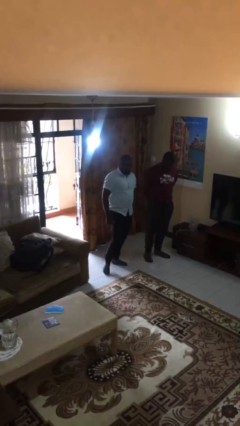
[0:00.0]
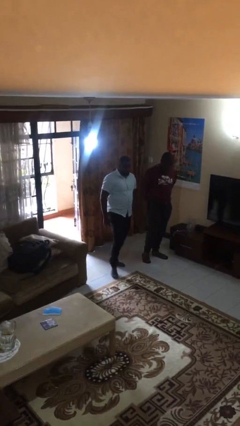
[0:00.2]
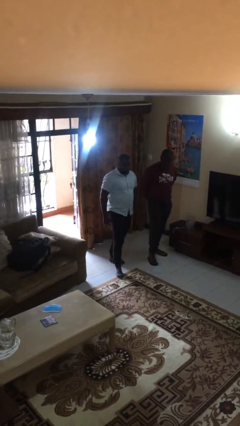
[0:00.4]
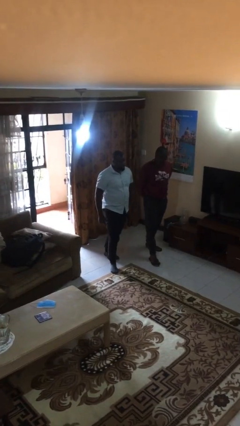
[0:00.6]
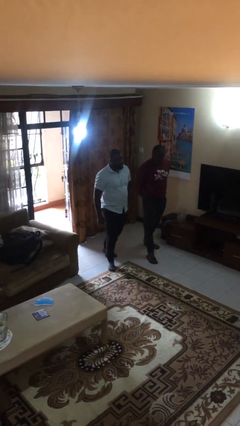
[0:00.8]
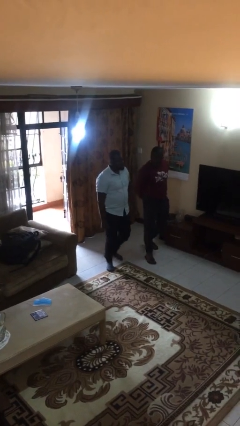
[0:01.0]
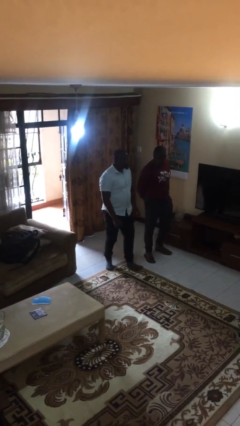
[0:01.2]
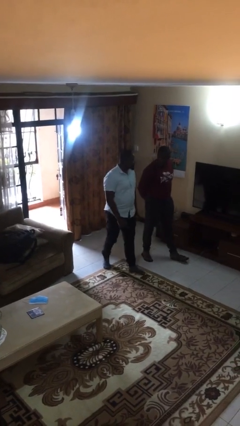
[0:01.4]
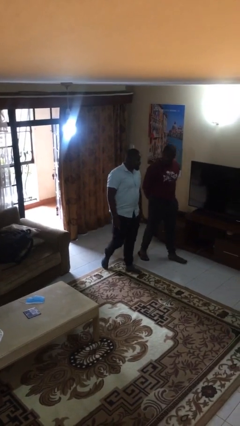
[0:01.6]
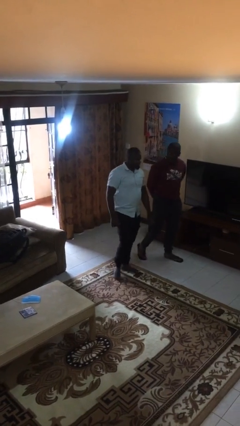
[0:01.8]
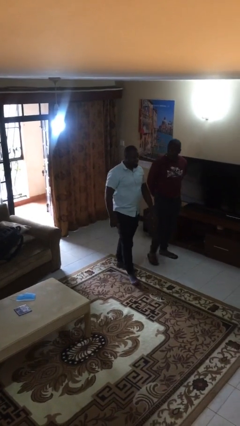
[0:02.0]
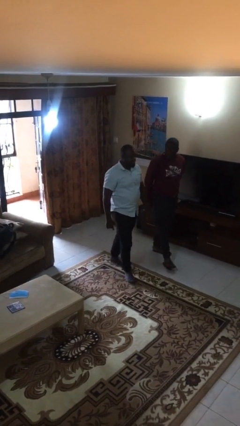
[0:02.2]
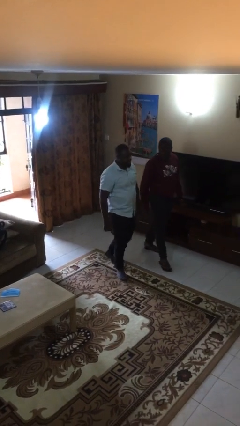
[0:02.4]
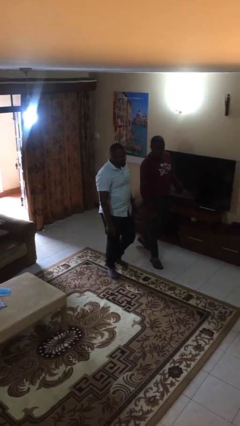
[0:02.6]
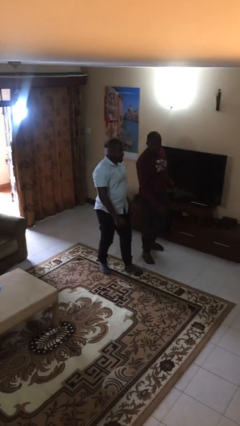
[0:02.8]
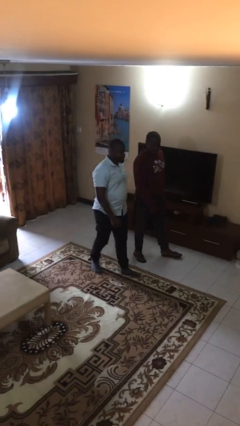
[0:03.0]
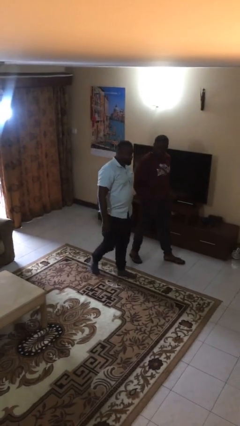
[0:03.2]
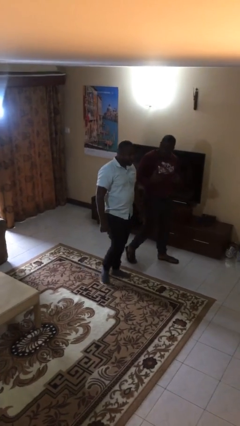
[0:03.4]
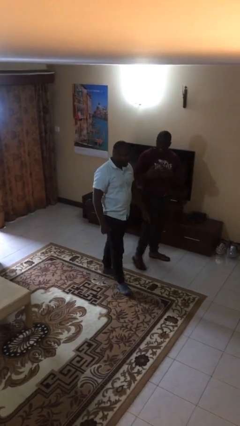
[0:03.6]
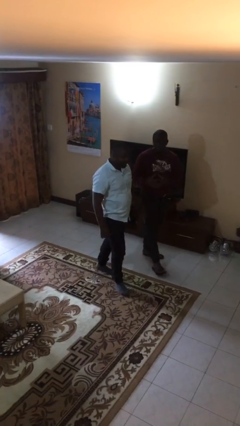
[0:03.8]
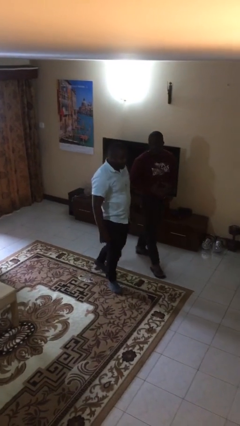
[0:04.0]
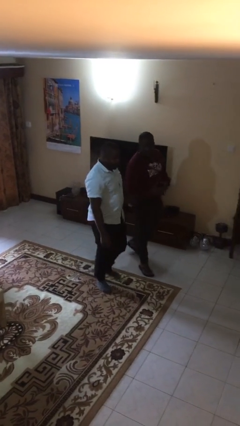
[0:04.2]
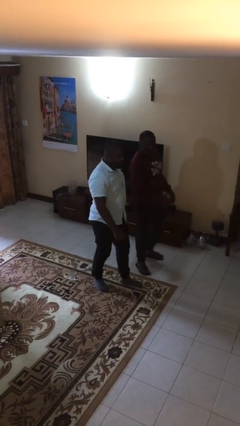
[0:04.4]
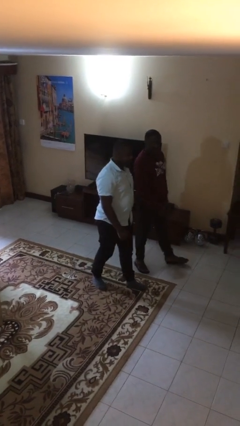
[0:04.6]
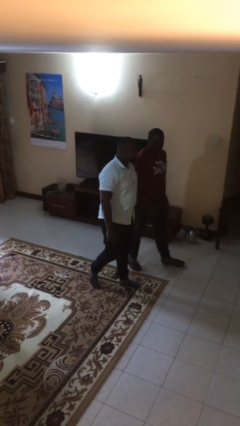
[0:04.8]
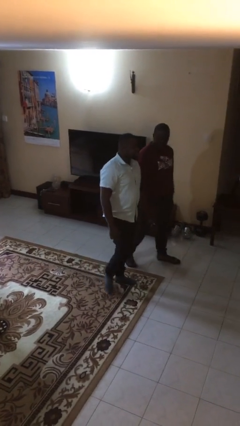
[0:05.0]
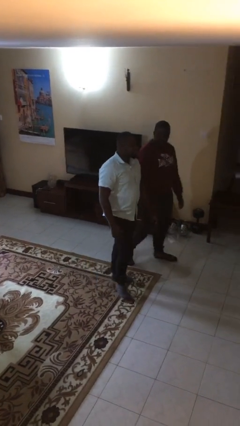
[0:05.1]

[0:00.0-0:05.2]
person talks to person

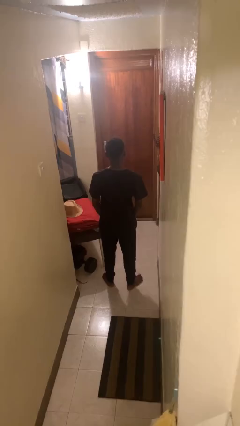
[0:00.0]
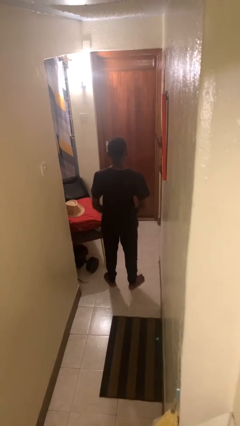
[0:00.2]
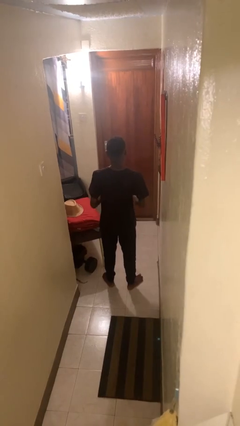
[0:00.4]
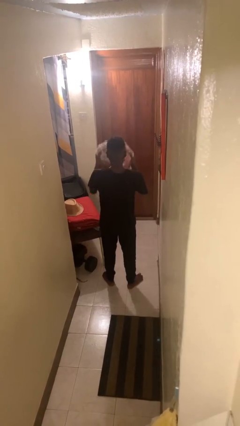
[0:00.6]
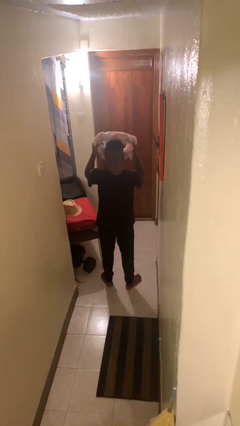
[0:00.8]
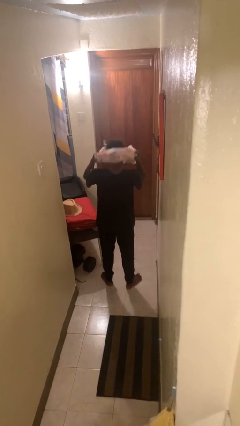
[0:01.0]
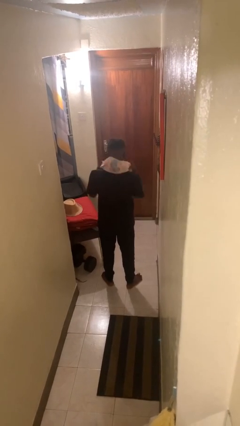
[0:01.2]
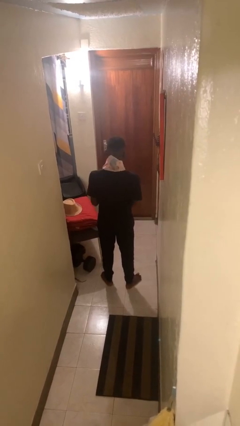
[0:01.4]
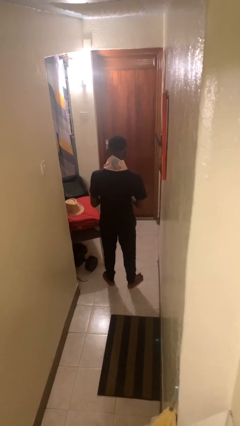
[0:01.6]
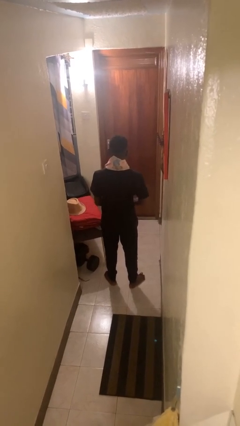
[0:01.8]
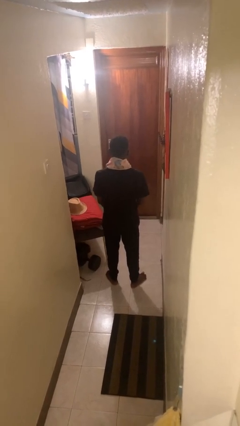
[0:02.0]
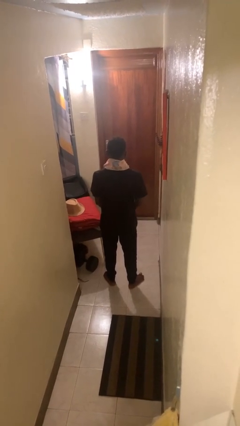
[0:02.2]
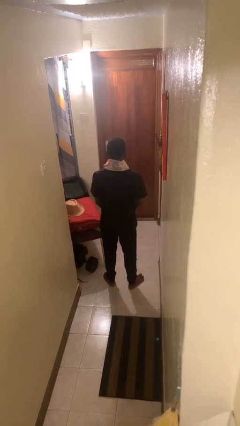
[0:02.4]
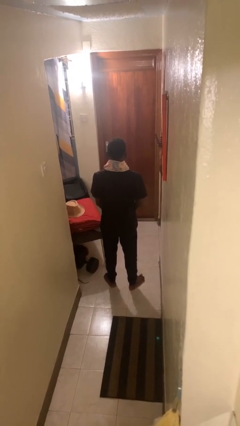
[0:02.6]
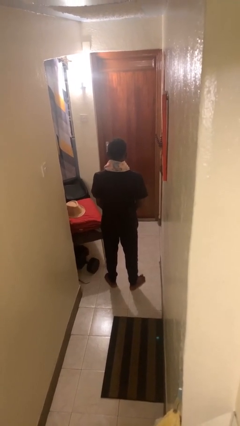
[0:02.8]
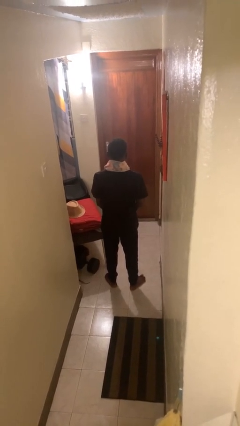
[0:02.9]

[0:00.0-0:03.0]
person puts on scarf

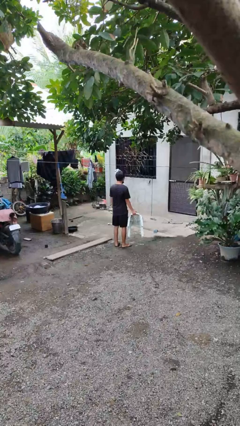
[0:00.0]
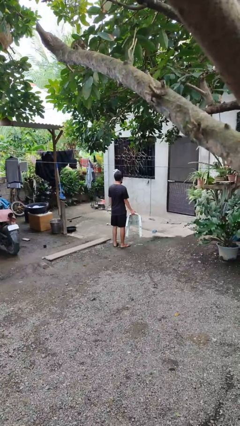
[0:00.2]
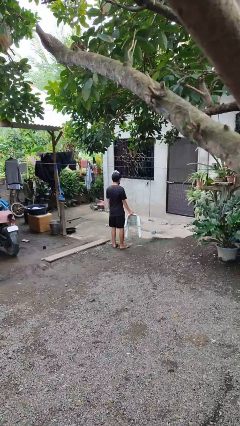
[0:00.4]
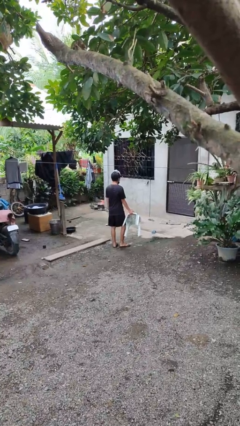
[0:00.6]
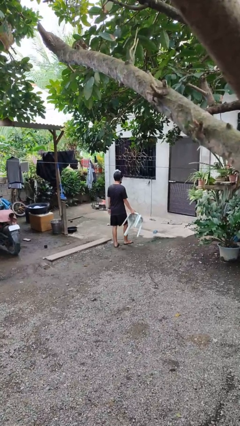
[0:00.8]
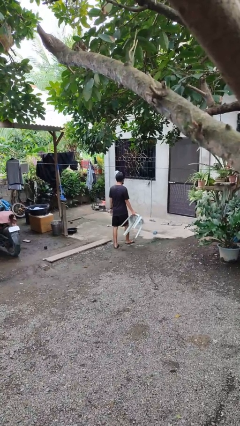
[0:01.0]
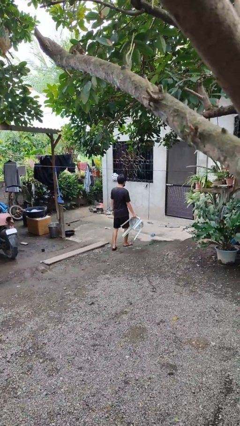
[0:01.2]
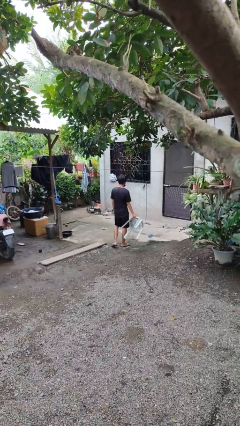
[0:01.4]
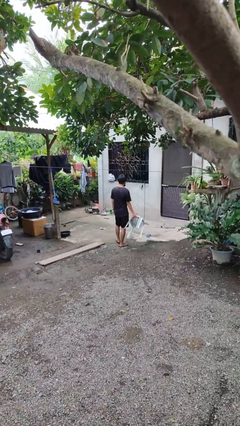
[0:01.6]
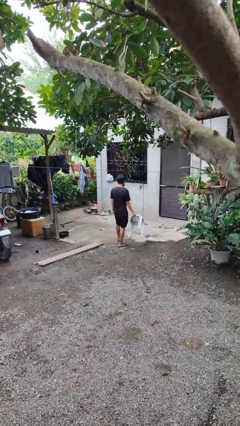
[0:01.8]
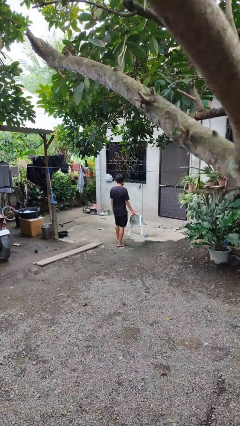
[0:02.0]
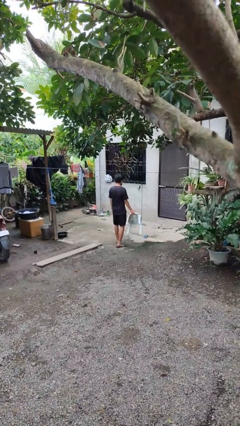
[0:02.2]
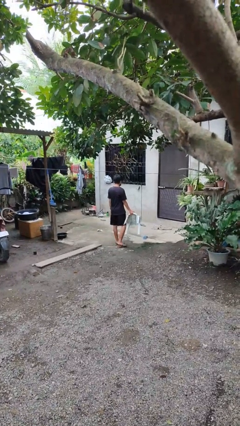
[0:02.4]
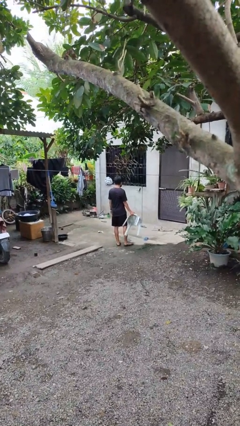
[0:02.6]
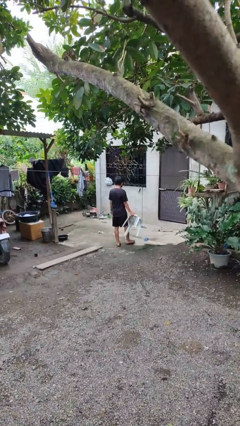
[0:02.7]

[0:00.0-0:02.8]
person carries furniture

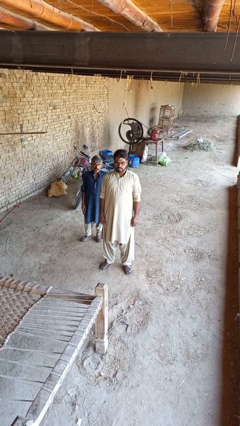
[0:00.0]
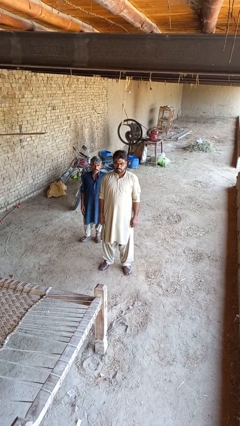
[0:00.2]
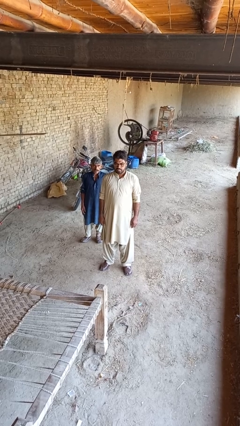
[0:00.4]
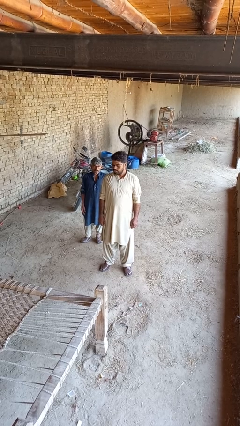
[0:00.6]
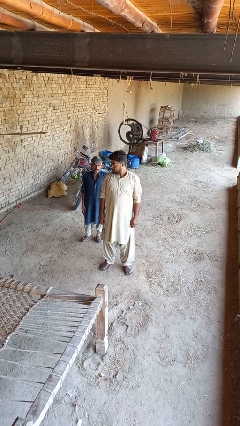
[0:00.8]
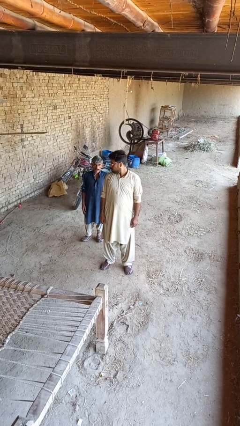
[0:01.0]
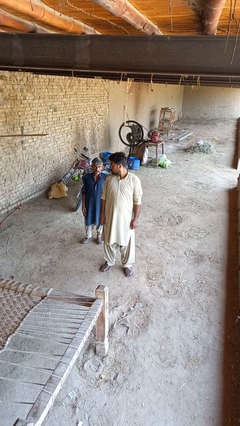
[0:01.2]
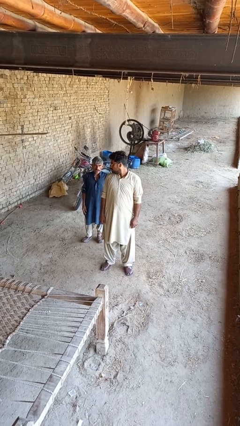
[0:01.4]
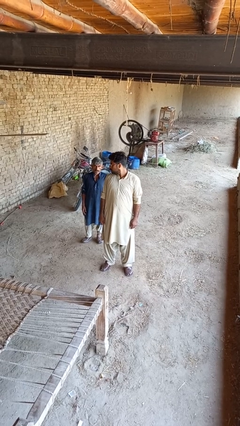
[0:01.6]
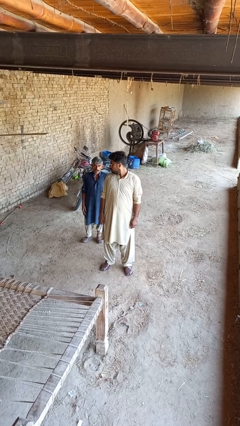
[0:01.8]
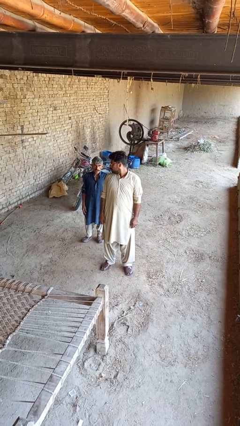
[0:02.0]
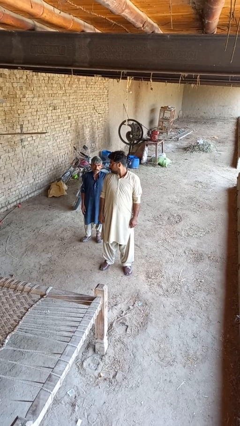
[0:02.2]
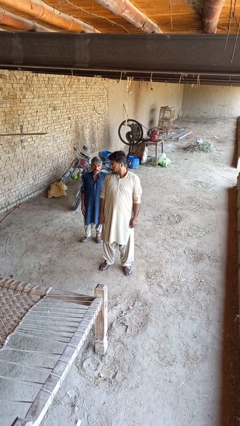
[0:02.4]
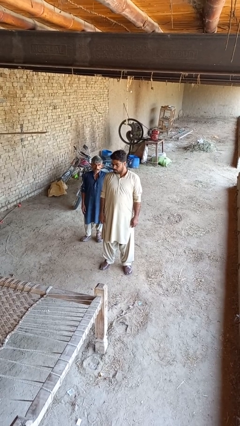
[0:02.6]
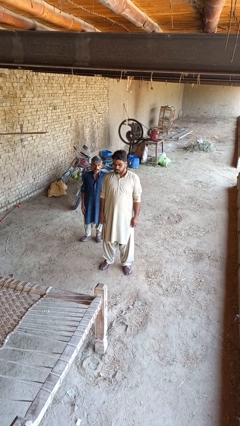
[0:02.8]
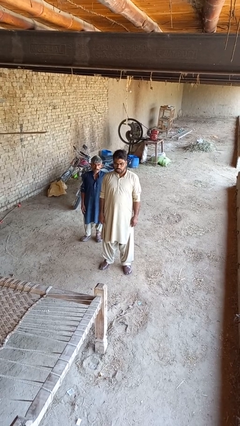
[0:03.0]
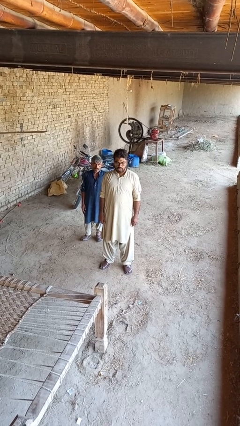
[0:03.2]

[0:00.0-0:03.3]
person looks over shoulder

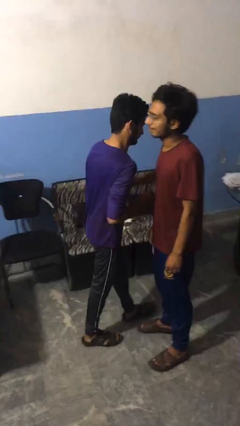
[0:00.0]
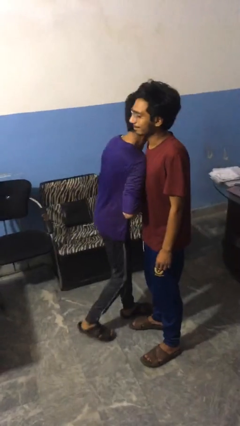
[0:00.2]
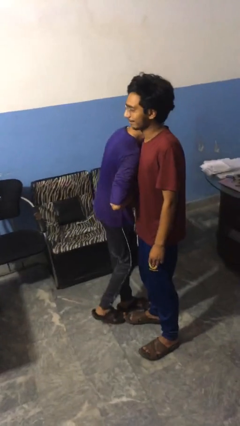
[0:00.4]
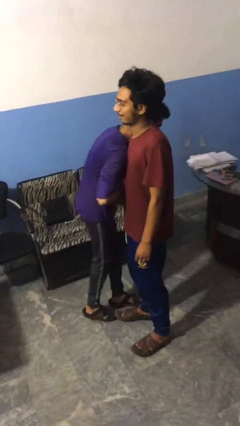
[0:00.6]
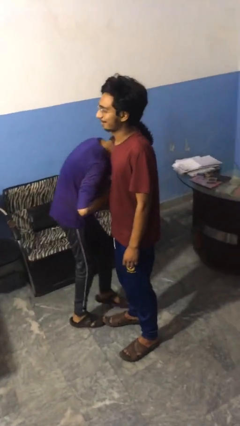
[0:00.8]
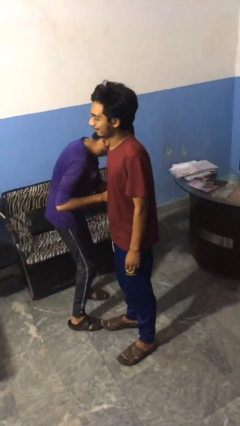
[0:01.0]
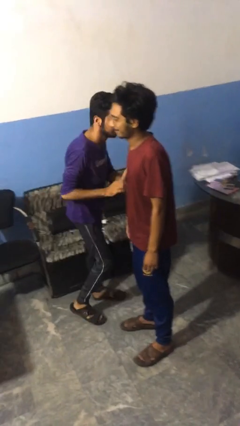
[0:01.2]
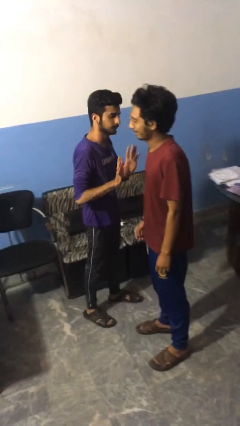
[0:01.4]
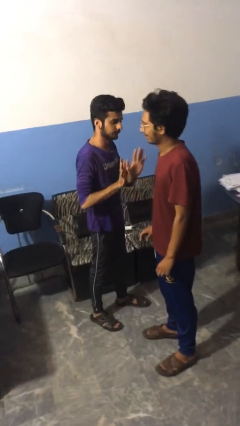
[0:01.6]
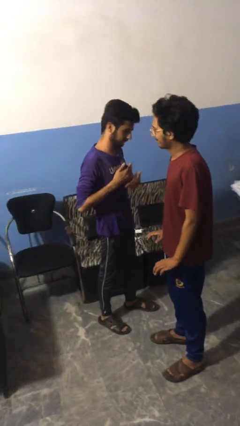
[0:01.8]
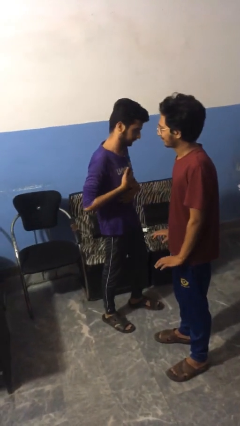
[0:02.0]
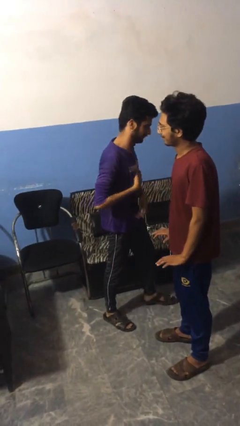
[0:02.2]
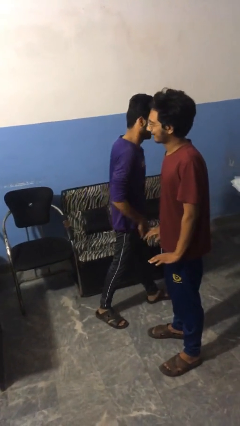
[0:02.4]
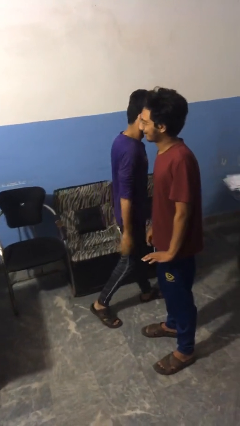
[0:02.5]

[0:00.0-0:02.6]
person bumps into person

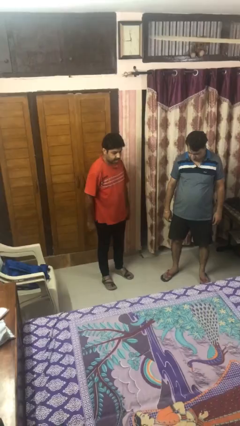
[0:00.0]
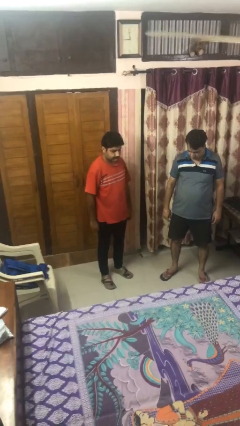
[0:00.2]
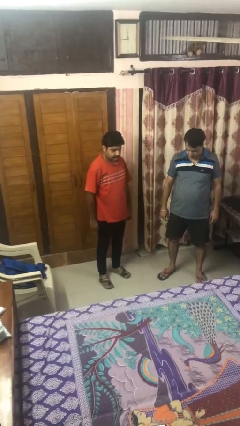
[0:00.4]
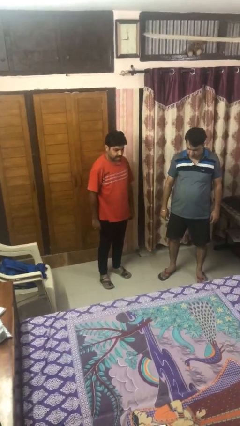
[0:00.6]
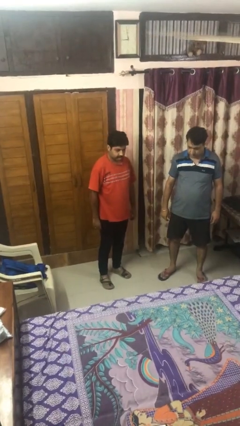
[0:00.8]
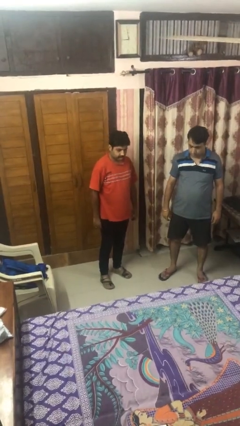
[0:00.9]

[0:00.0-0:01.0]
person grabs person by forearm
